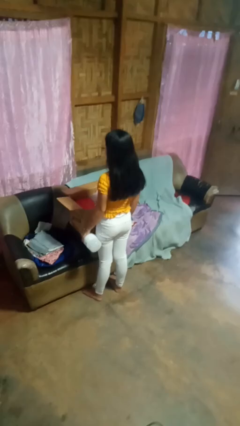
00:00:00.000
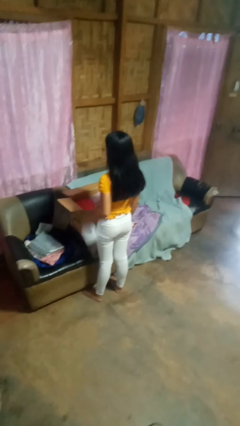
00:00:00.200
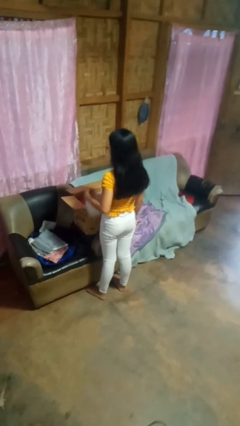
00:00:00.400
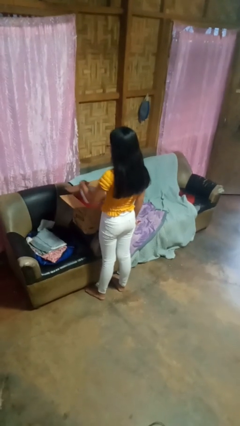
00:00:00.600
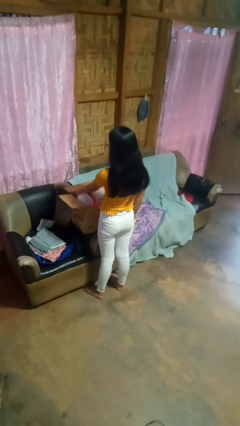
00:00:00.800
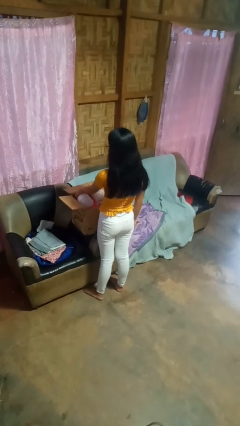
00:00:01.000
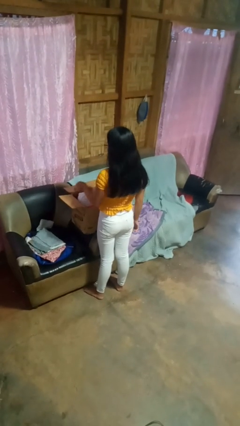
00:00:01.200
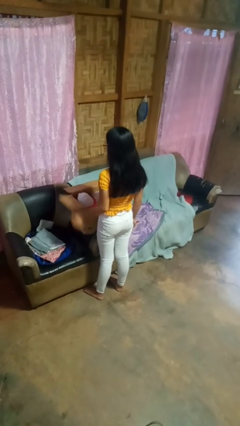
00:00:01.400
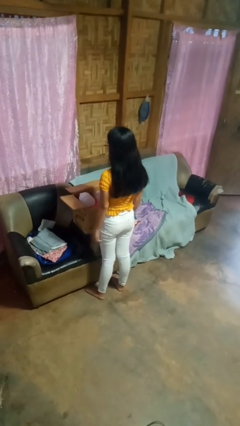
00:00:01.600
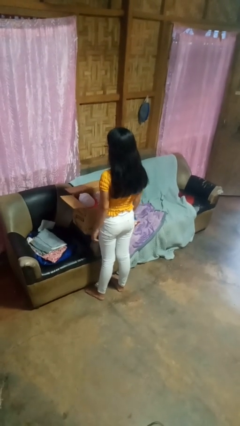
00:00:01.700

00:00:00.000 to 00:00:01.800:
person puts object into box

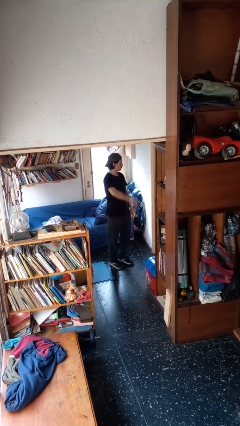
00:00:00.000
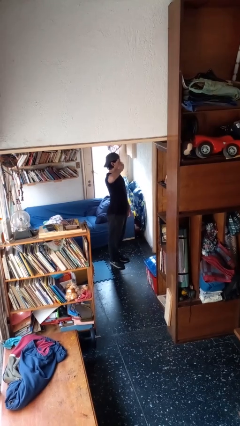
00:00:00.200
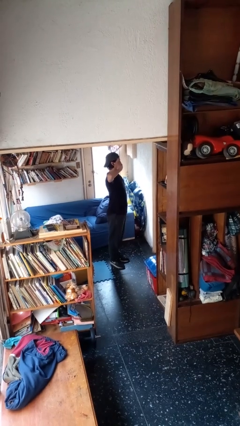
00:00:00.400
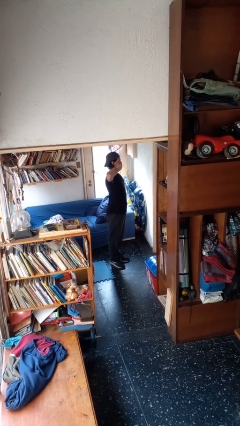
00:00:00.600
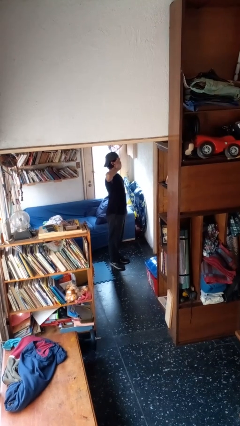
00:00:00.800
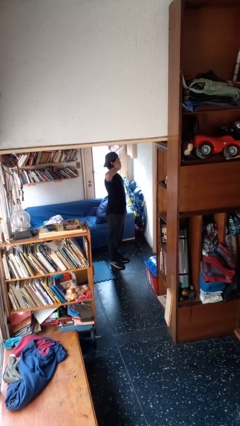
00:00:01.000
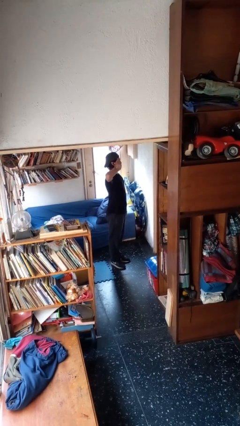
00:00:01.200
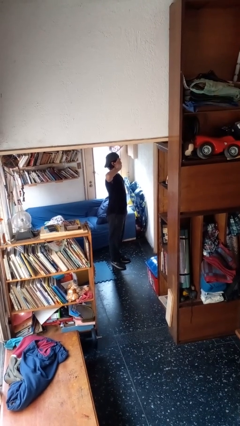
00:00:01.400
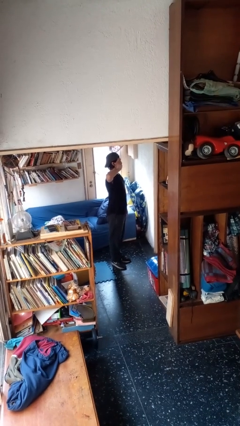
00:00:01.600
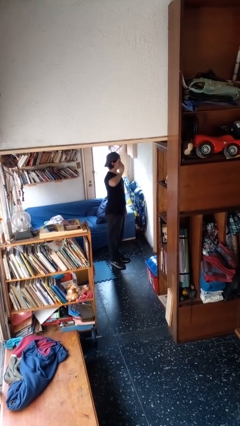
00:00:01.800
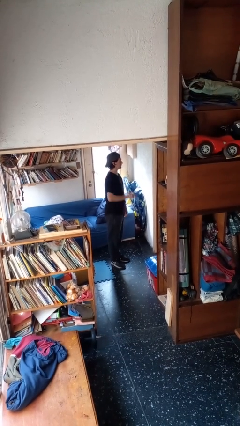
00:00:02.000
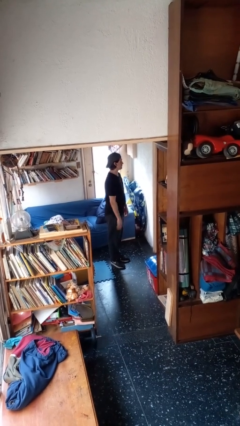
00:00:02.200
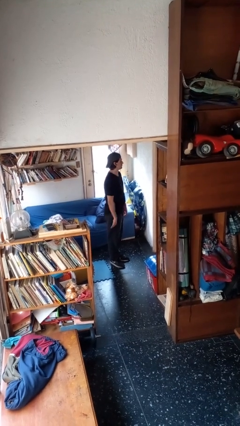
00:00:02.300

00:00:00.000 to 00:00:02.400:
person salutes

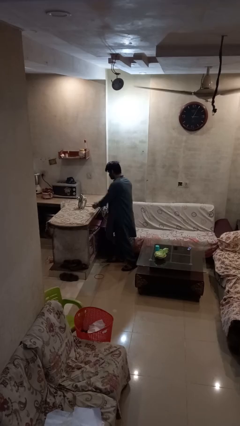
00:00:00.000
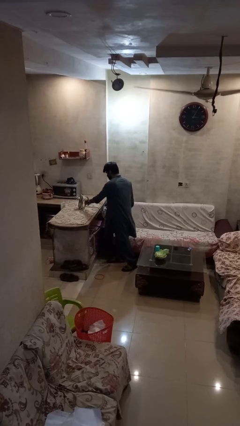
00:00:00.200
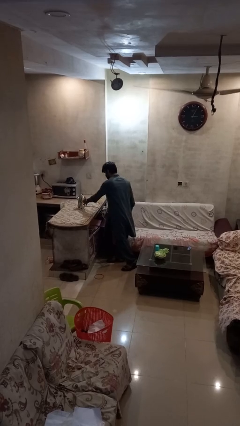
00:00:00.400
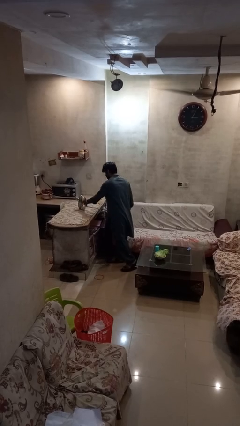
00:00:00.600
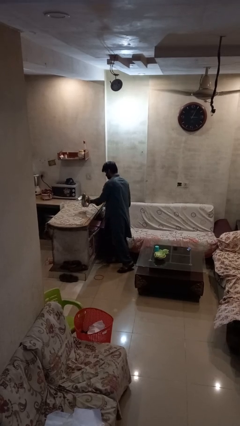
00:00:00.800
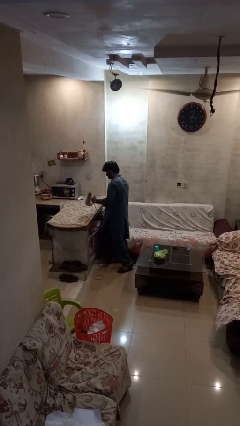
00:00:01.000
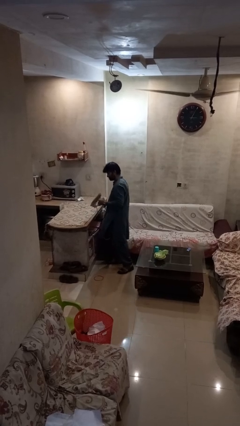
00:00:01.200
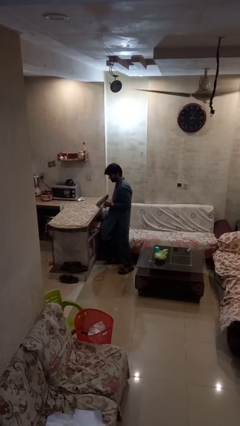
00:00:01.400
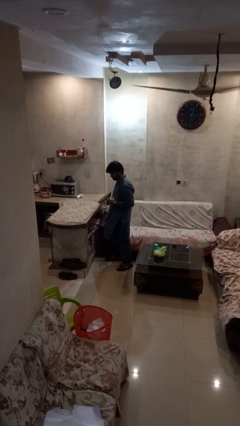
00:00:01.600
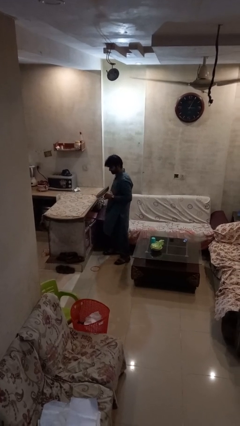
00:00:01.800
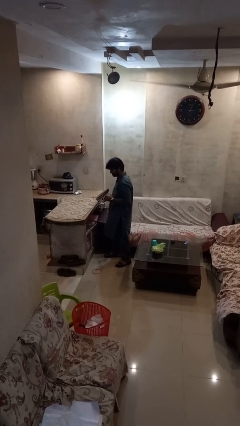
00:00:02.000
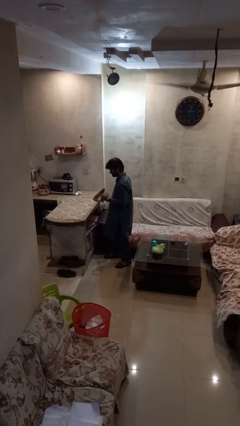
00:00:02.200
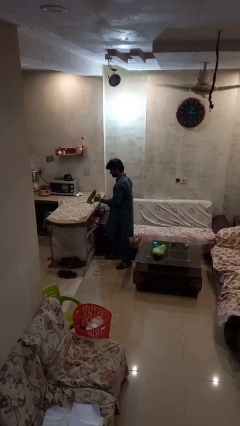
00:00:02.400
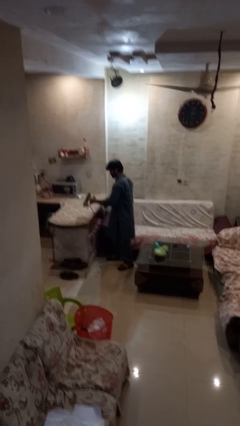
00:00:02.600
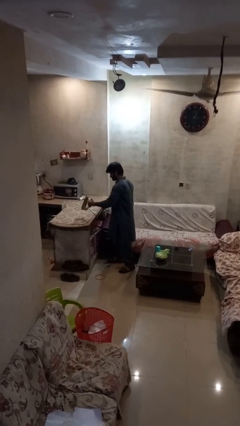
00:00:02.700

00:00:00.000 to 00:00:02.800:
person picks up object from countertop

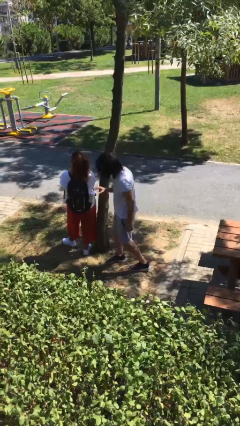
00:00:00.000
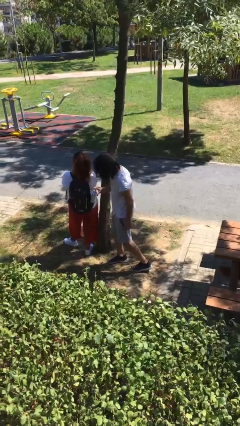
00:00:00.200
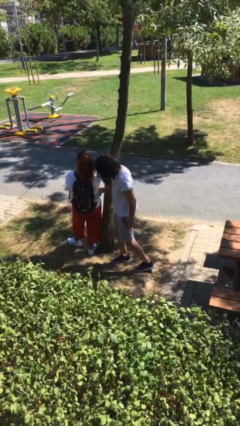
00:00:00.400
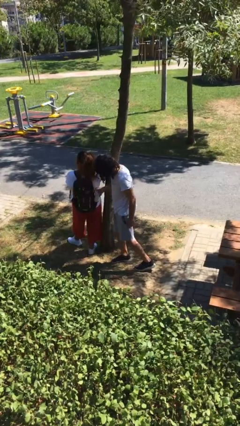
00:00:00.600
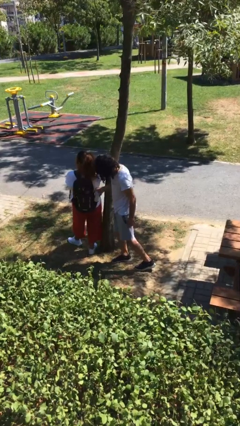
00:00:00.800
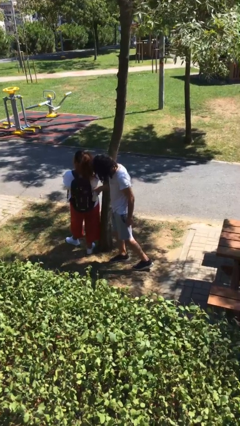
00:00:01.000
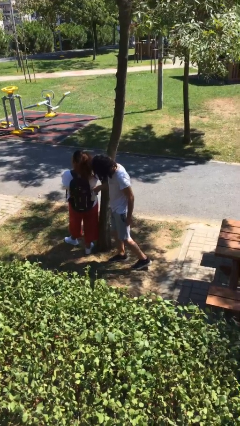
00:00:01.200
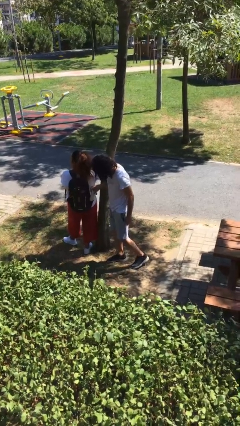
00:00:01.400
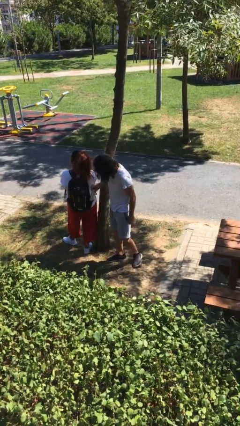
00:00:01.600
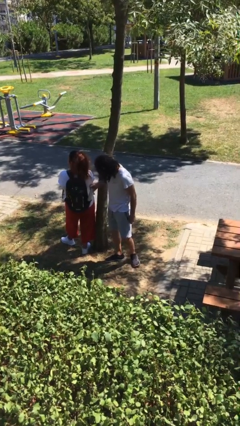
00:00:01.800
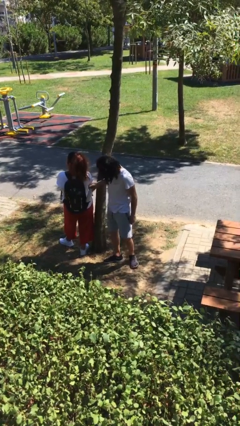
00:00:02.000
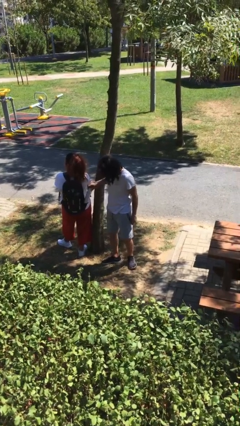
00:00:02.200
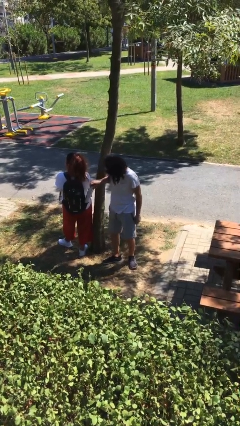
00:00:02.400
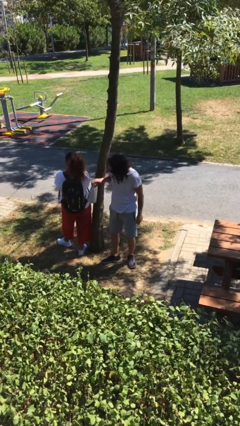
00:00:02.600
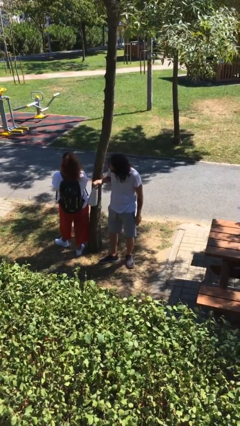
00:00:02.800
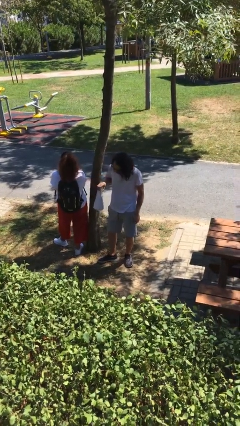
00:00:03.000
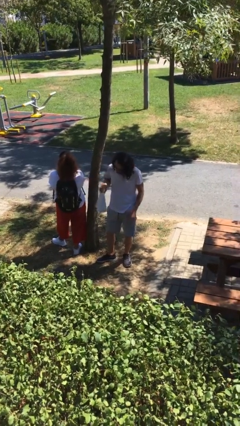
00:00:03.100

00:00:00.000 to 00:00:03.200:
person steals object from person

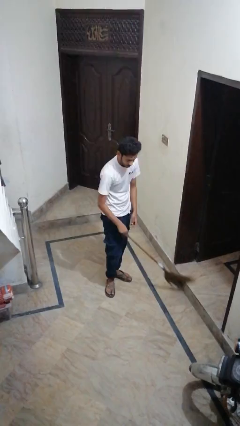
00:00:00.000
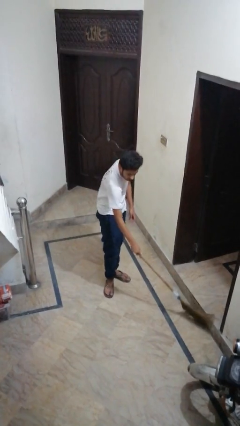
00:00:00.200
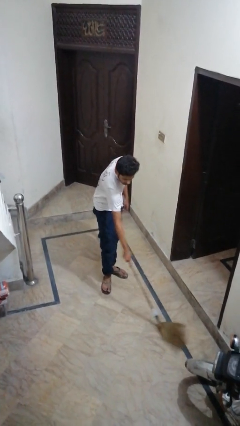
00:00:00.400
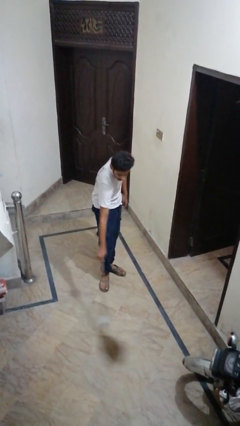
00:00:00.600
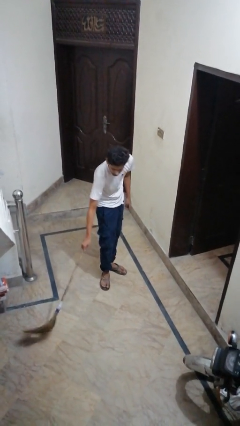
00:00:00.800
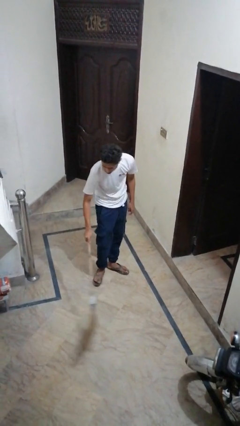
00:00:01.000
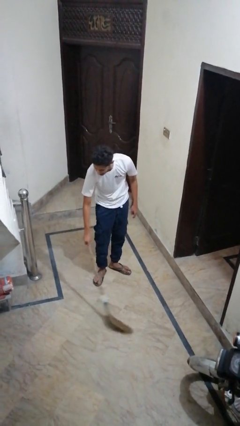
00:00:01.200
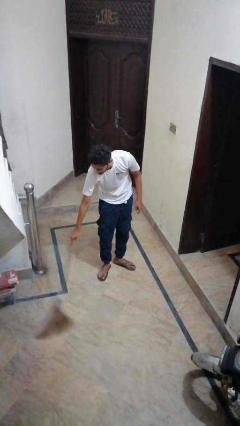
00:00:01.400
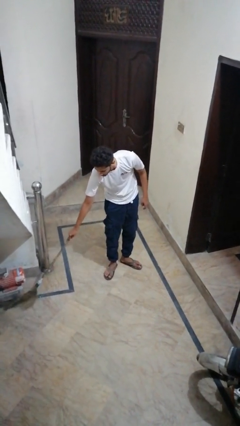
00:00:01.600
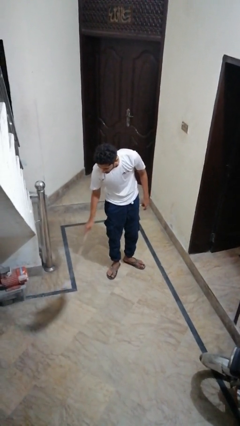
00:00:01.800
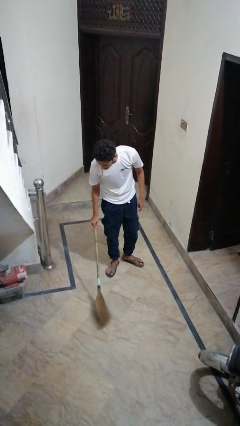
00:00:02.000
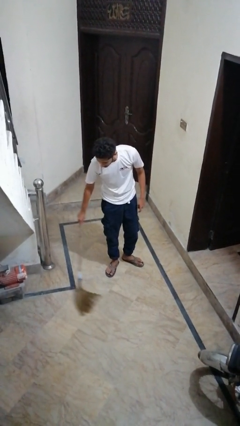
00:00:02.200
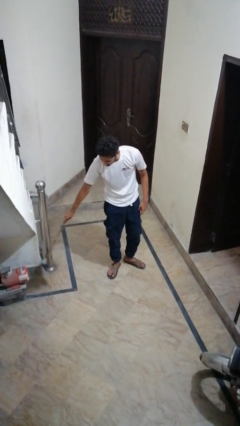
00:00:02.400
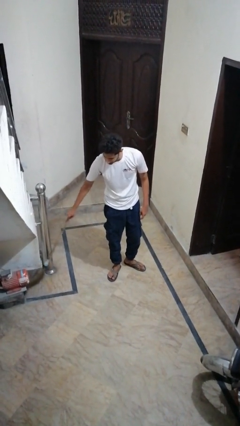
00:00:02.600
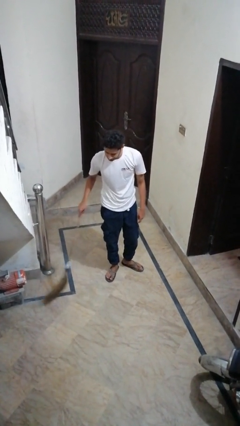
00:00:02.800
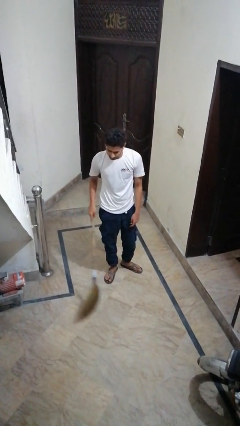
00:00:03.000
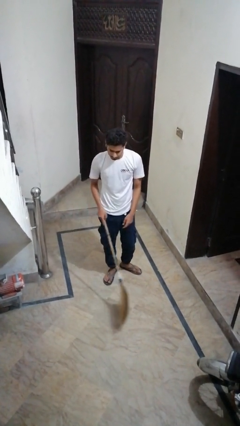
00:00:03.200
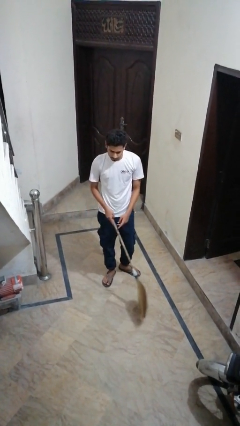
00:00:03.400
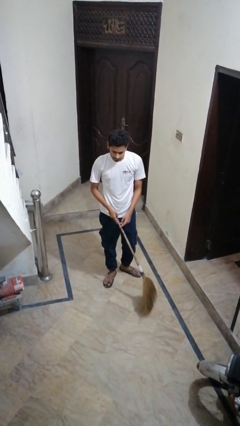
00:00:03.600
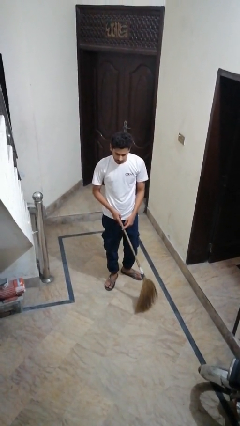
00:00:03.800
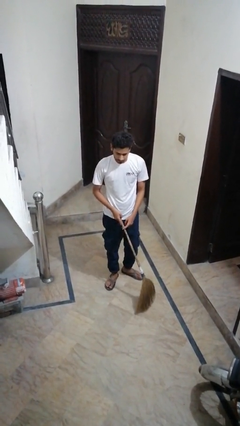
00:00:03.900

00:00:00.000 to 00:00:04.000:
person sweeps floor

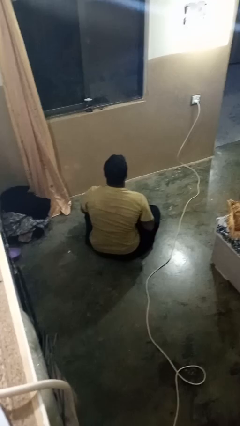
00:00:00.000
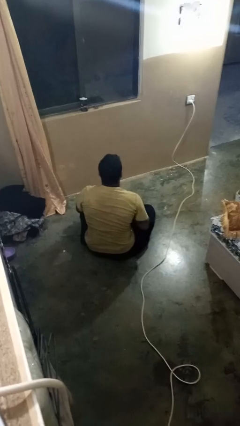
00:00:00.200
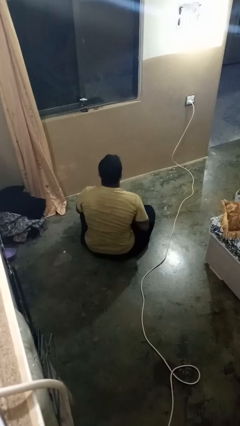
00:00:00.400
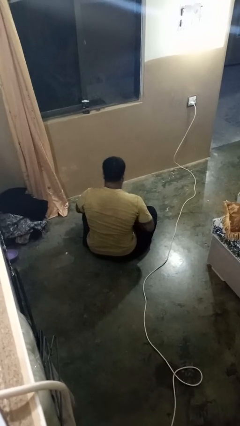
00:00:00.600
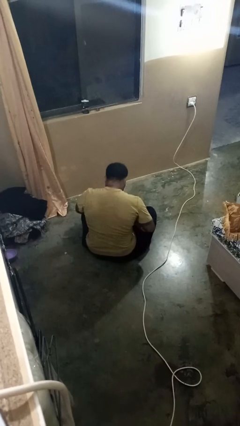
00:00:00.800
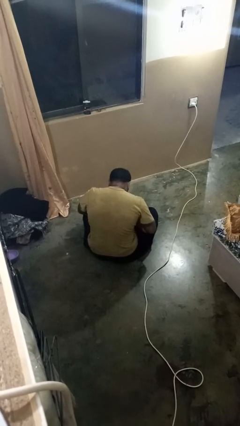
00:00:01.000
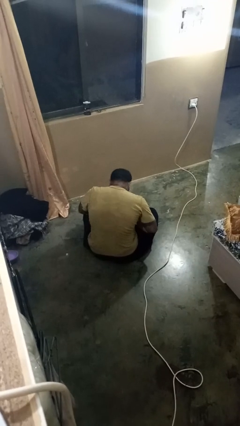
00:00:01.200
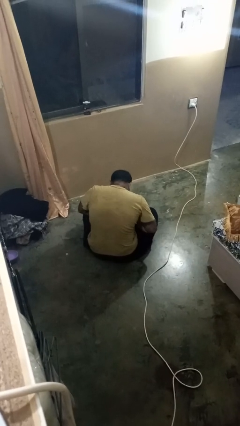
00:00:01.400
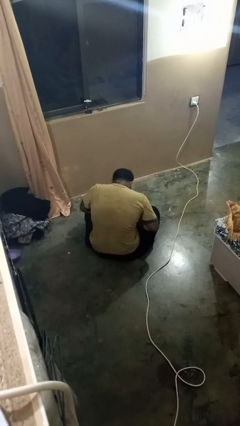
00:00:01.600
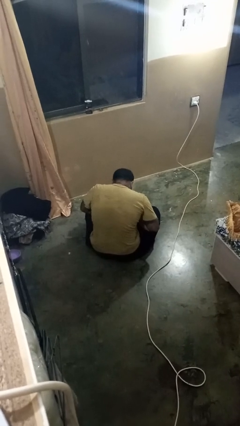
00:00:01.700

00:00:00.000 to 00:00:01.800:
person looks at hands in lap

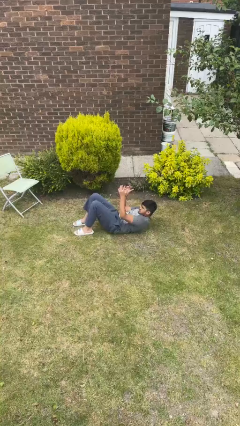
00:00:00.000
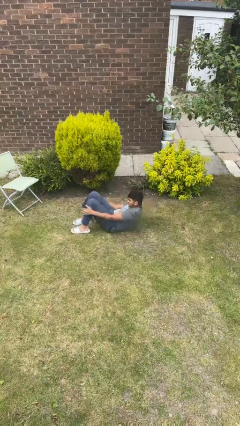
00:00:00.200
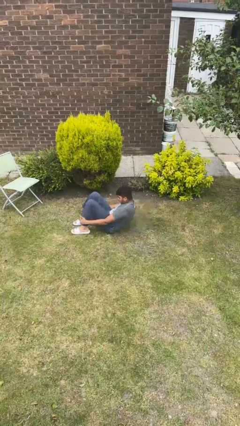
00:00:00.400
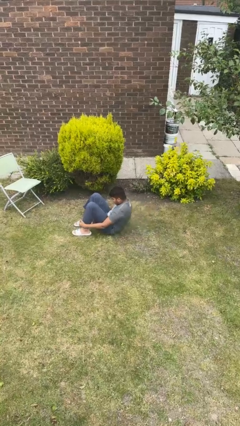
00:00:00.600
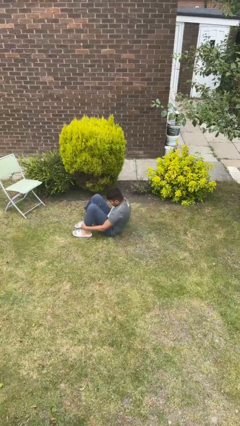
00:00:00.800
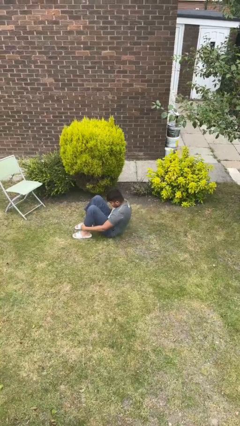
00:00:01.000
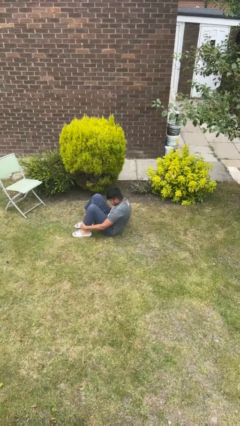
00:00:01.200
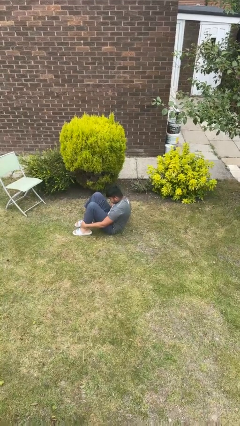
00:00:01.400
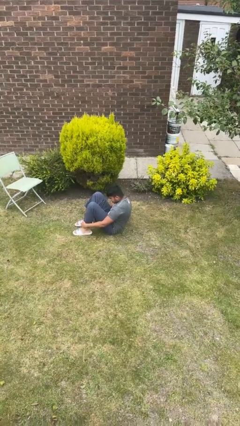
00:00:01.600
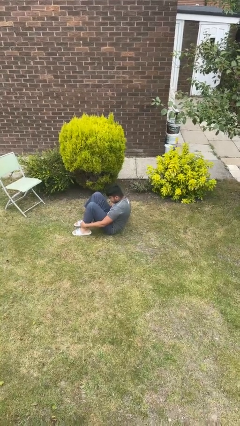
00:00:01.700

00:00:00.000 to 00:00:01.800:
person exercises with situp
